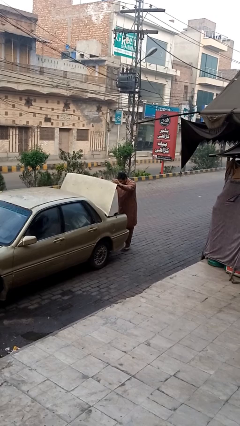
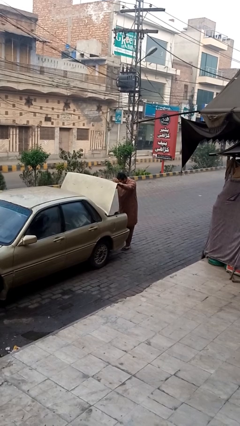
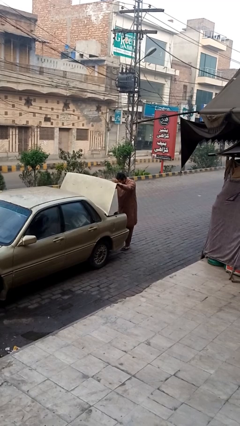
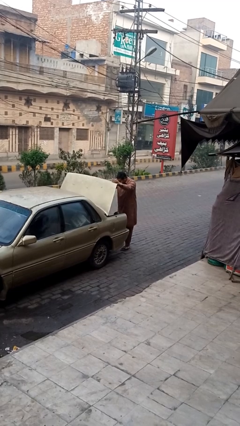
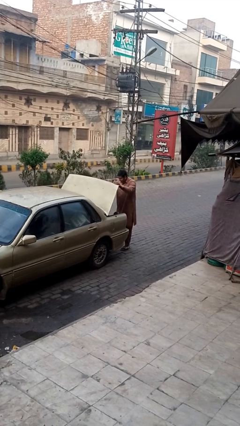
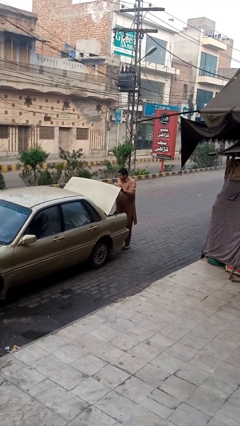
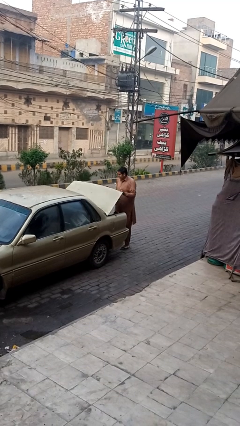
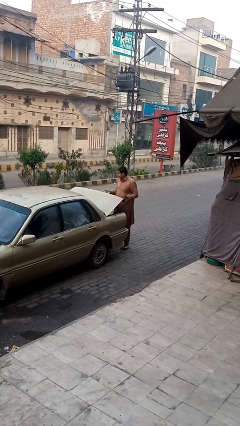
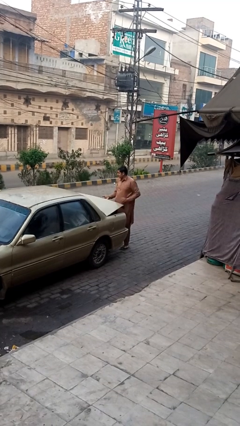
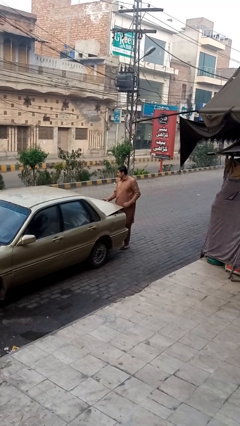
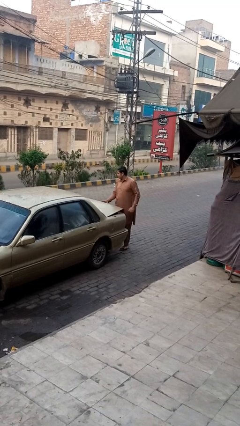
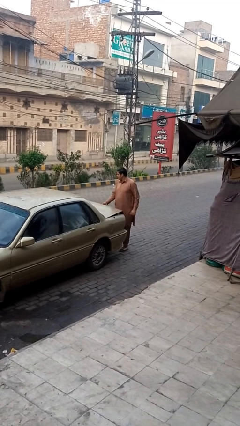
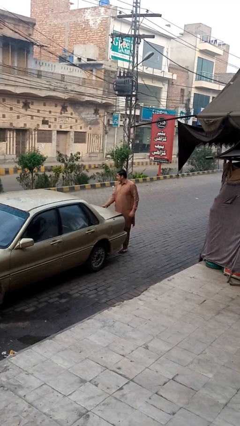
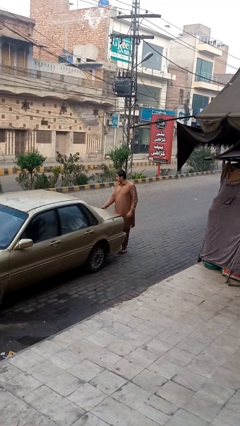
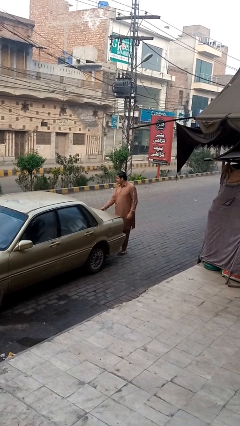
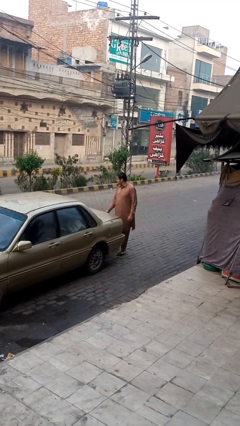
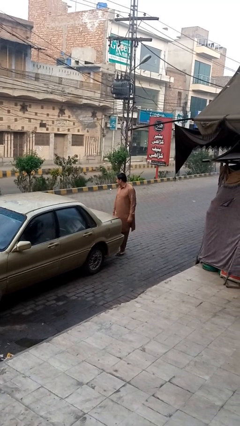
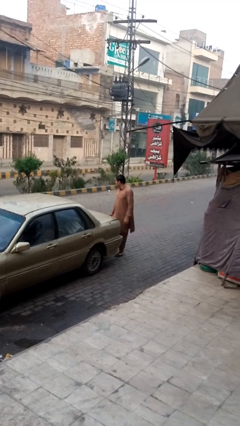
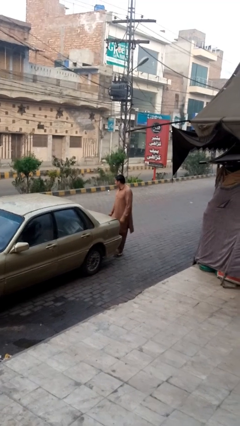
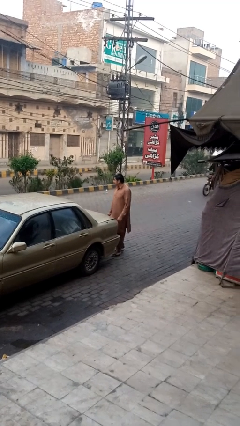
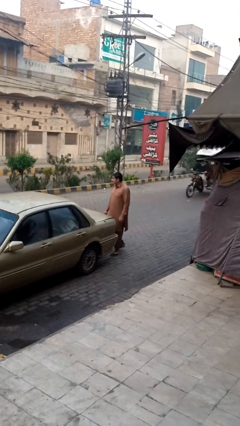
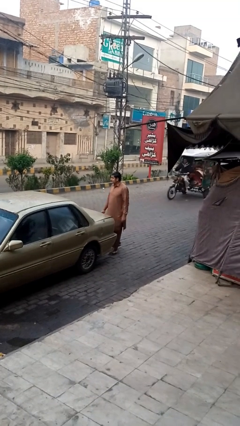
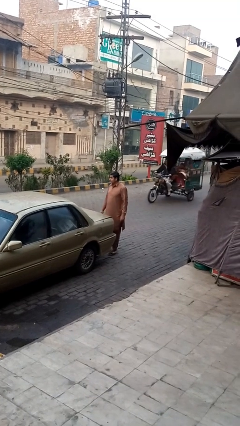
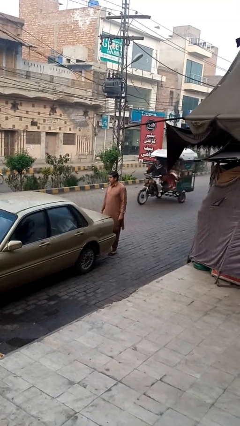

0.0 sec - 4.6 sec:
person closes car trunk

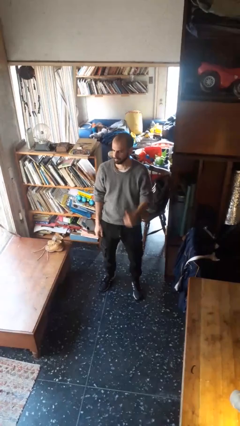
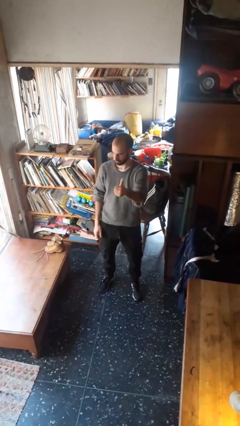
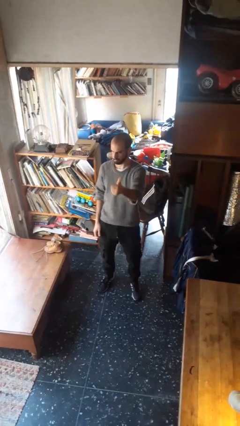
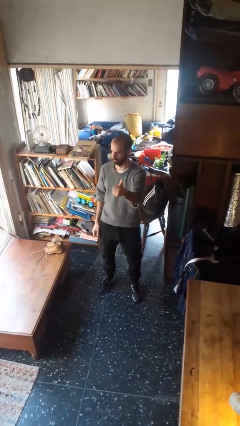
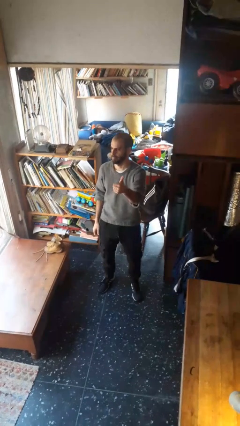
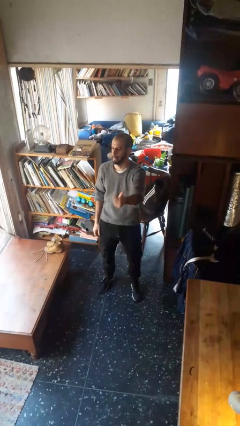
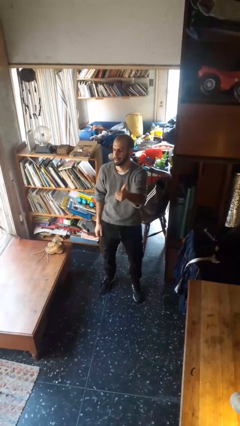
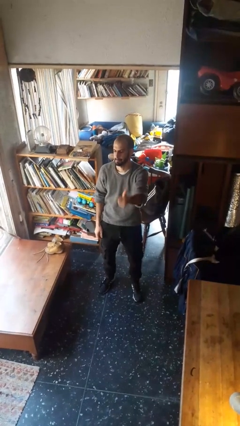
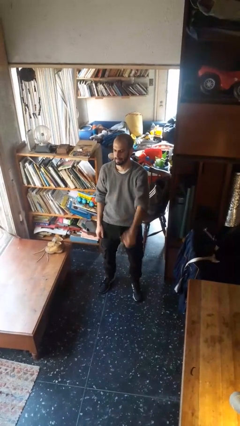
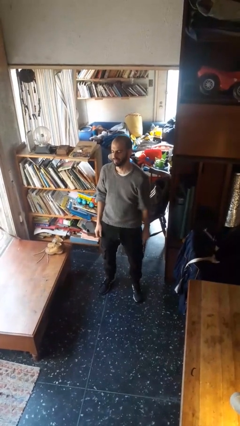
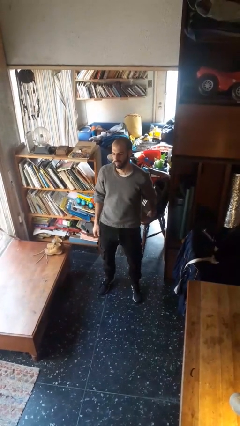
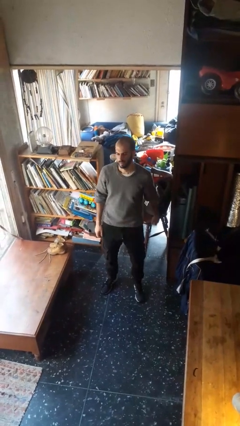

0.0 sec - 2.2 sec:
person gestures thumbs up

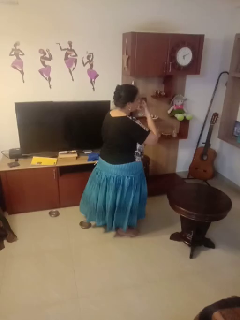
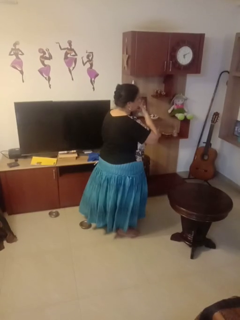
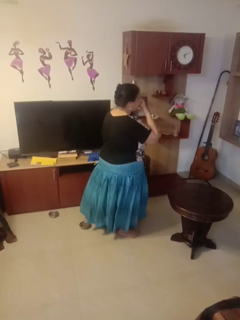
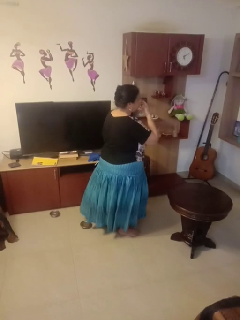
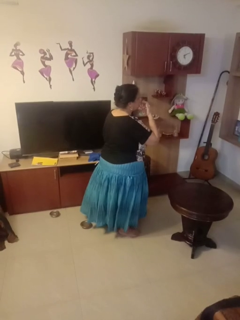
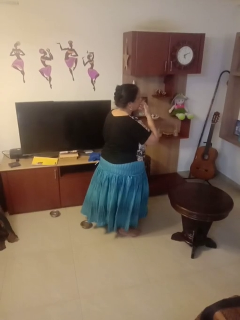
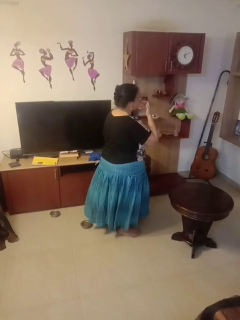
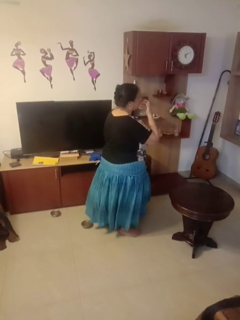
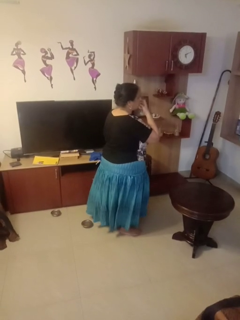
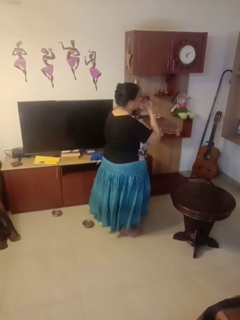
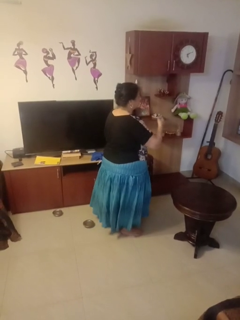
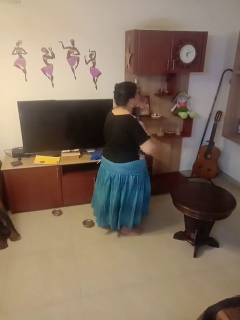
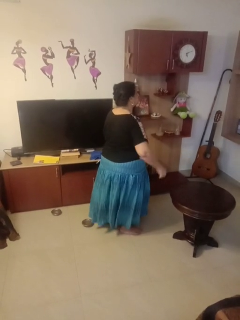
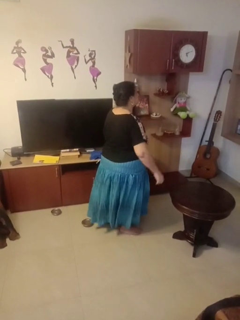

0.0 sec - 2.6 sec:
person licks fingers

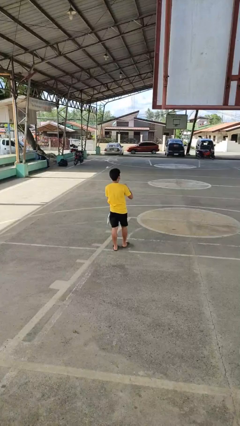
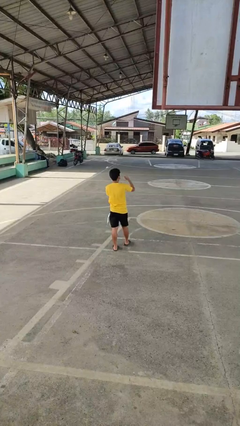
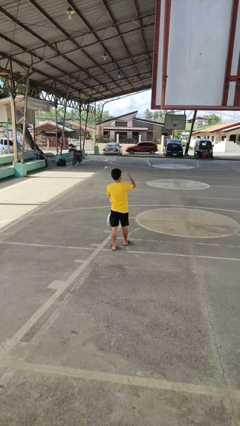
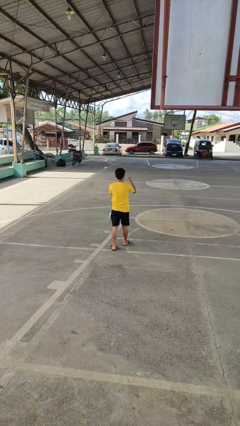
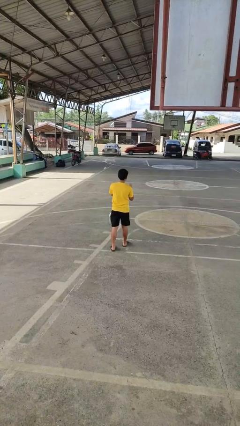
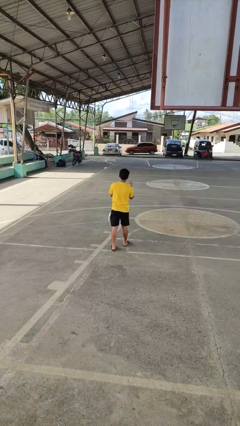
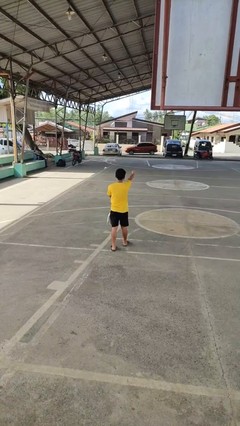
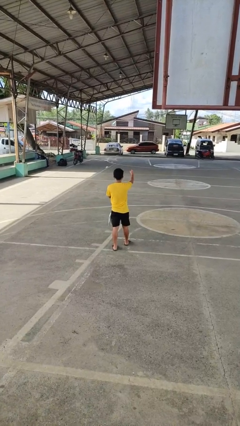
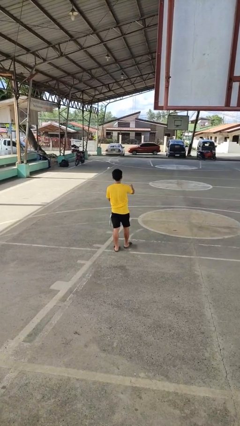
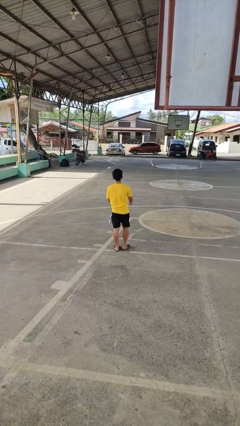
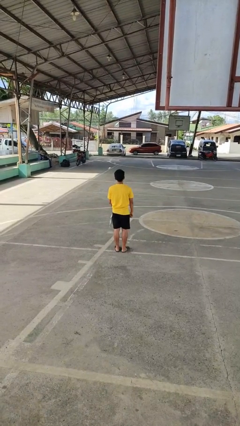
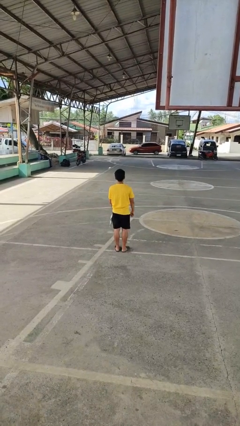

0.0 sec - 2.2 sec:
person punches

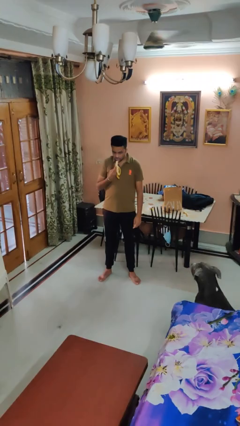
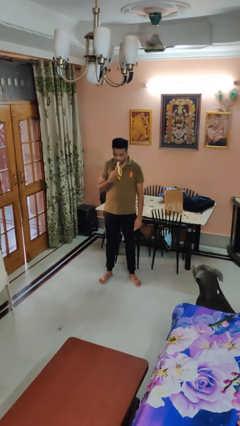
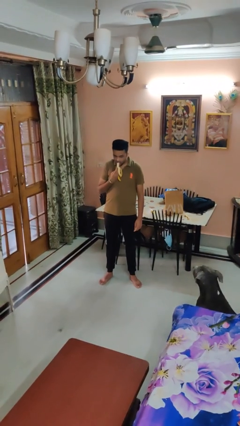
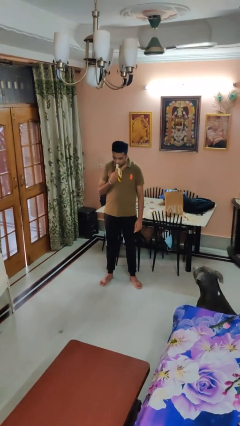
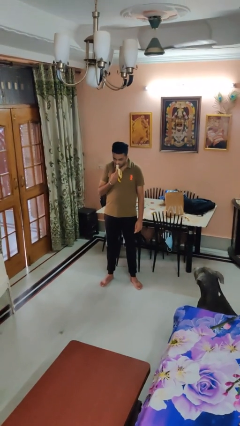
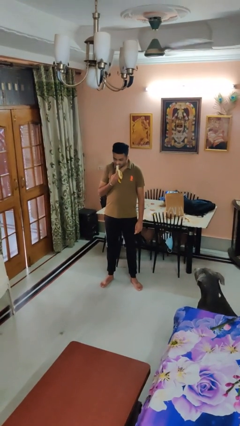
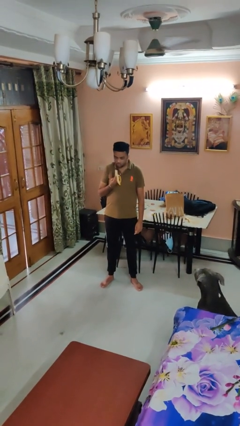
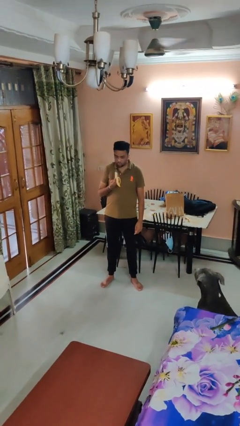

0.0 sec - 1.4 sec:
person eats banana

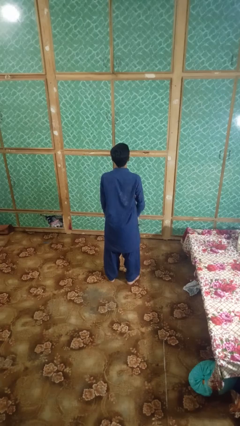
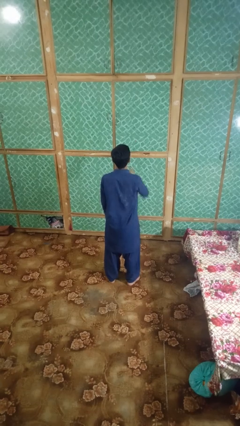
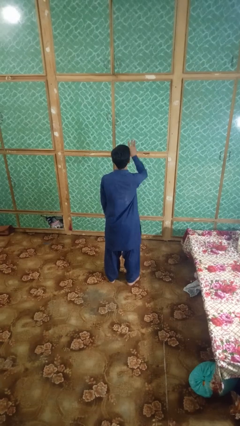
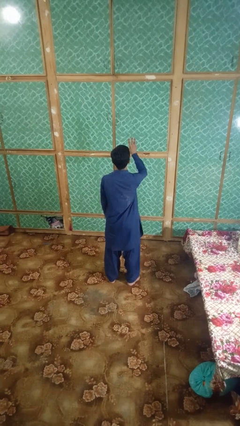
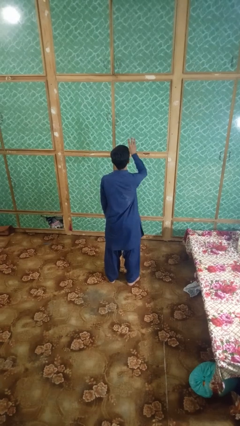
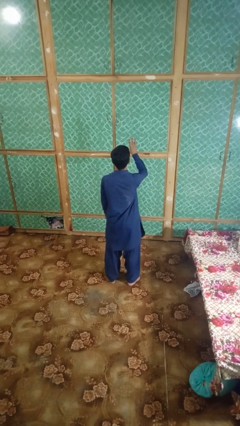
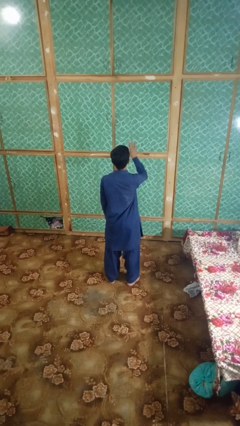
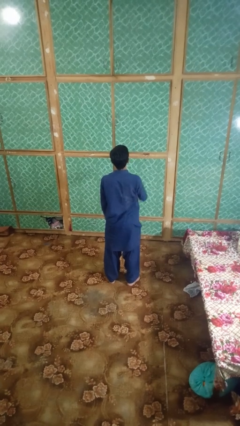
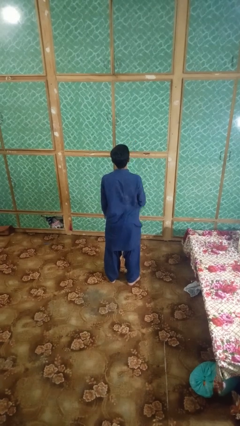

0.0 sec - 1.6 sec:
person gestures number three

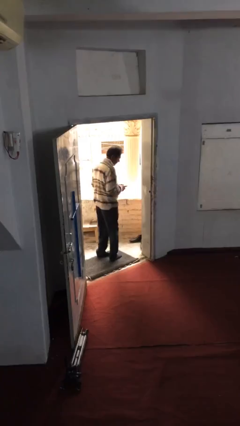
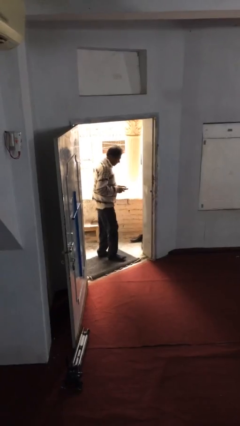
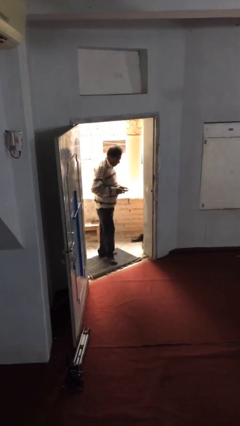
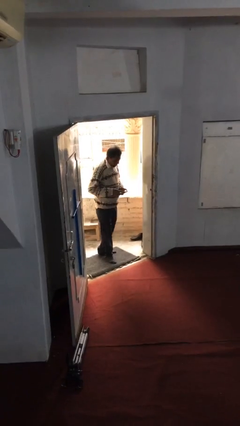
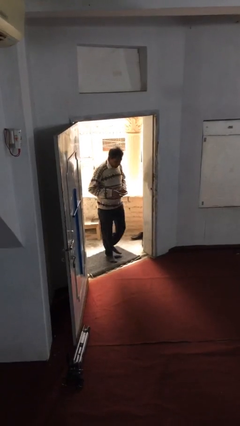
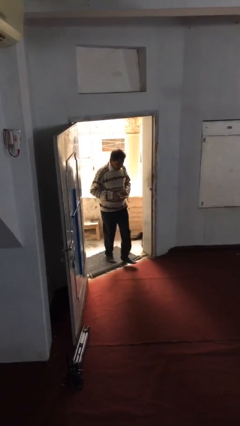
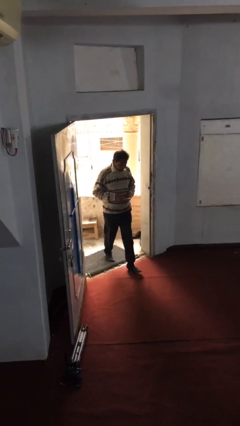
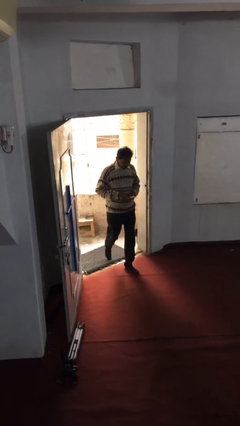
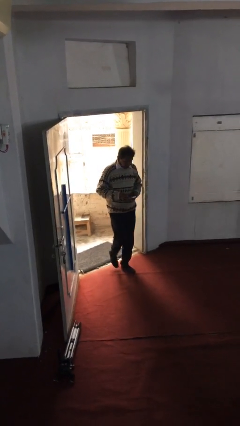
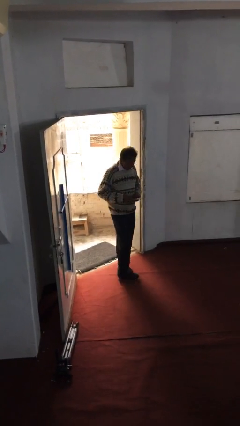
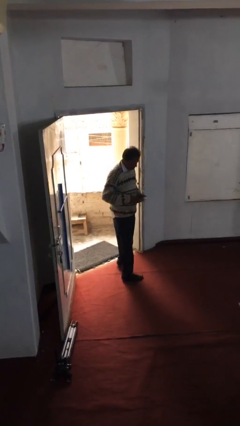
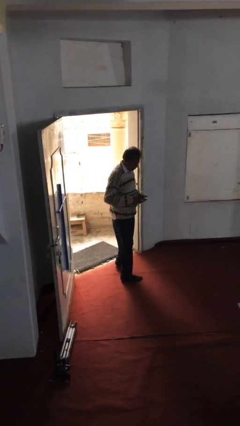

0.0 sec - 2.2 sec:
person enters scene through structure

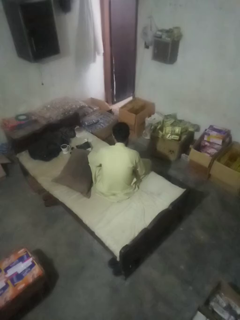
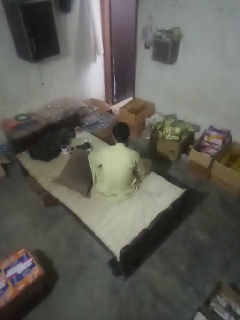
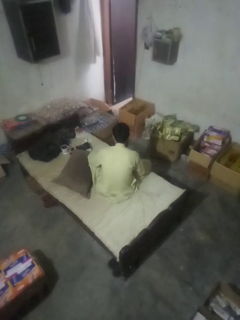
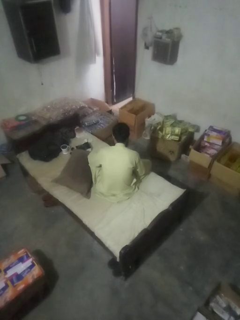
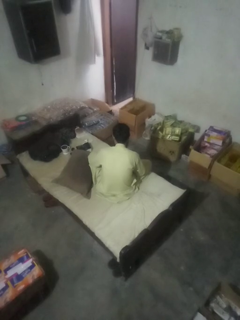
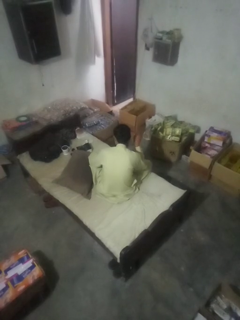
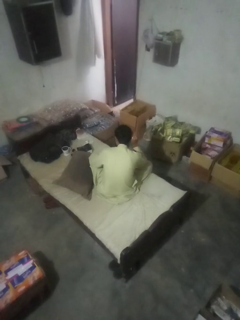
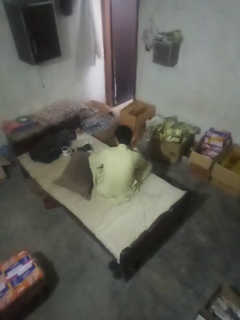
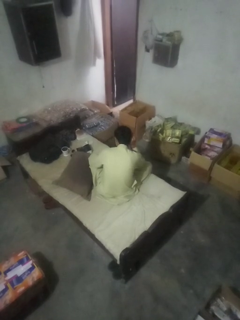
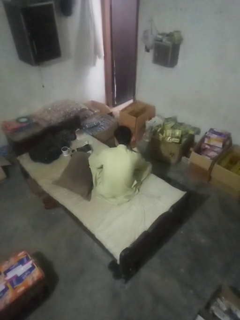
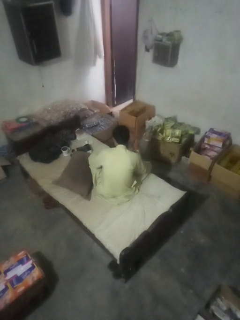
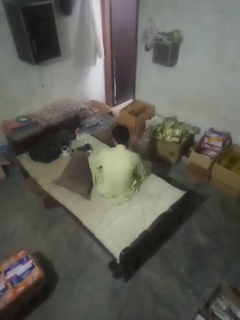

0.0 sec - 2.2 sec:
person gestures listen closely
